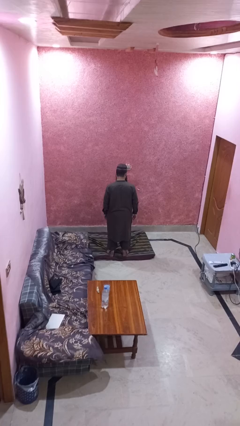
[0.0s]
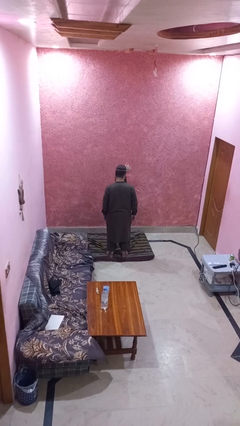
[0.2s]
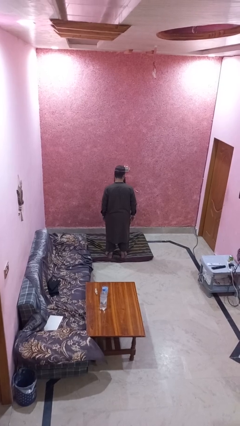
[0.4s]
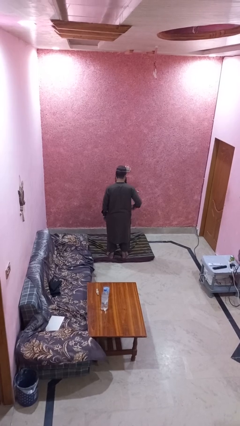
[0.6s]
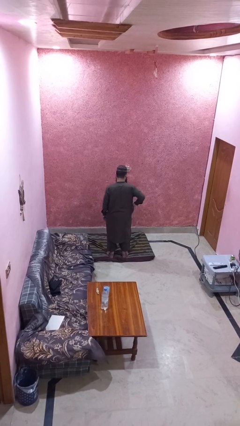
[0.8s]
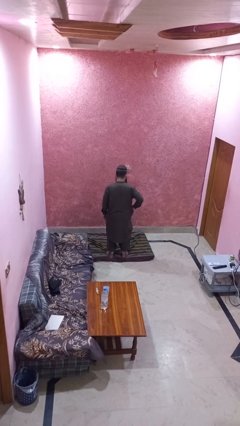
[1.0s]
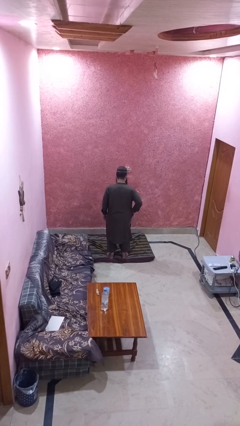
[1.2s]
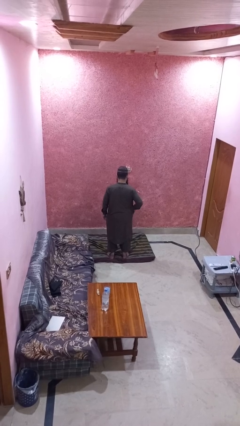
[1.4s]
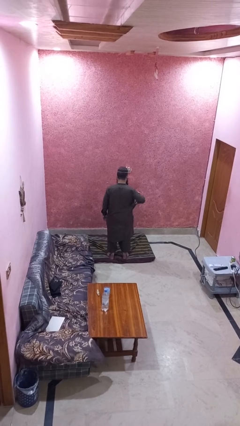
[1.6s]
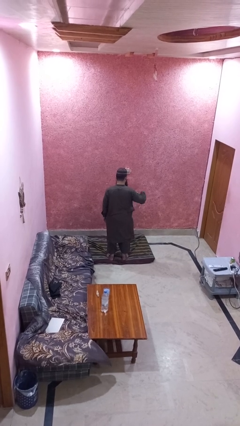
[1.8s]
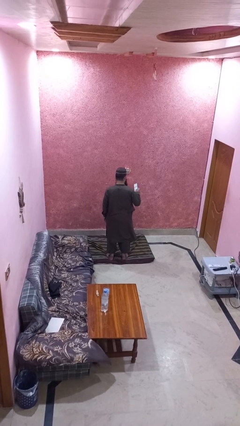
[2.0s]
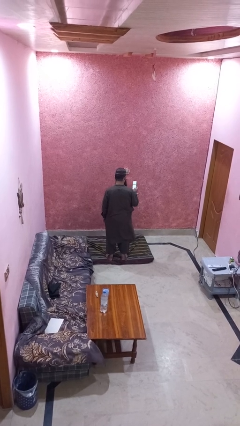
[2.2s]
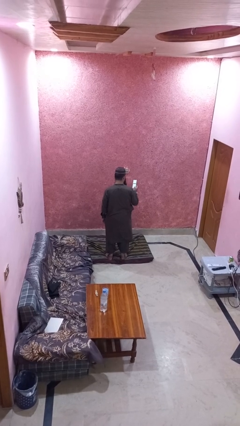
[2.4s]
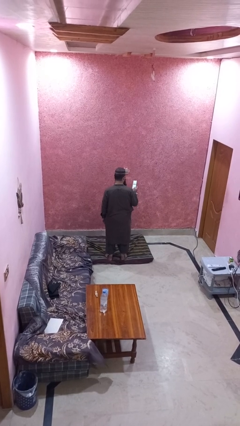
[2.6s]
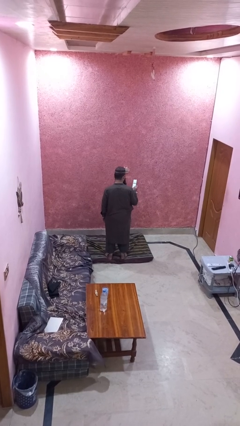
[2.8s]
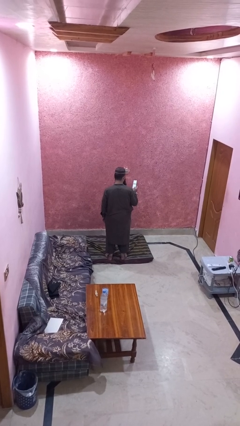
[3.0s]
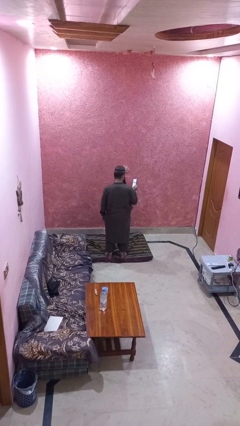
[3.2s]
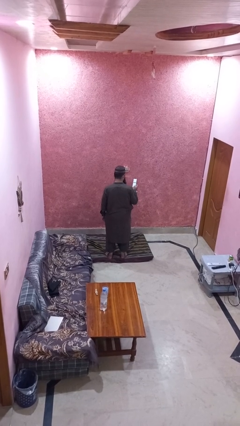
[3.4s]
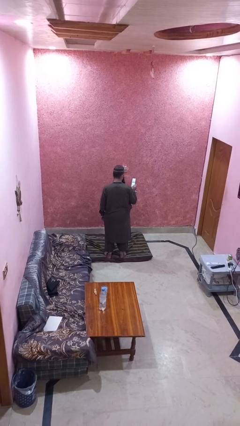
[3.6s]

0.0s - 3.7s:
person takes phone from pocket

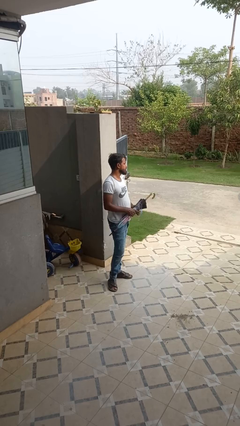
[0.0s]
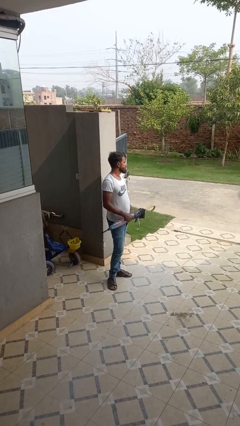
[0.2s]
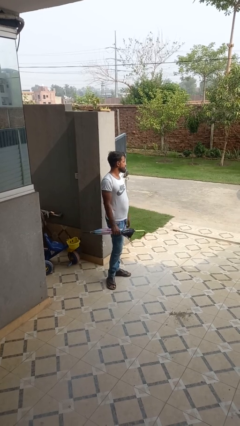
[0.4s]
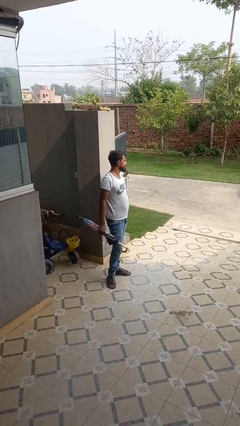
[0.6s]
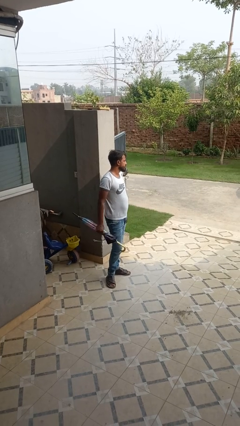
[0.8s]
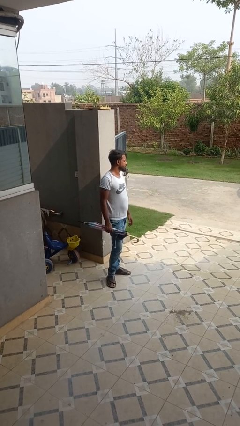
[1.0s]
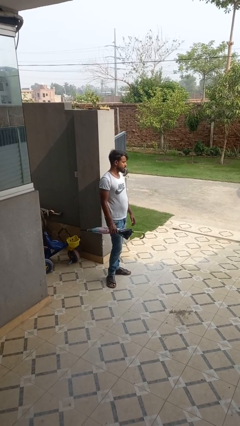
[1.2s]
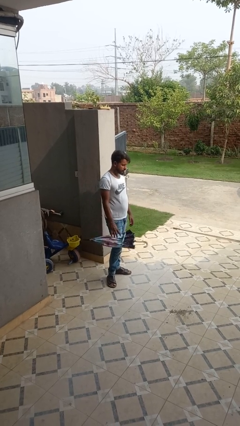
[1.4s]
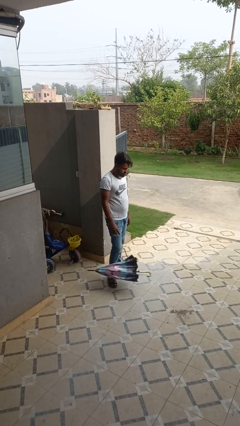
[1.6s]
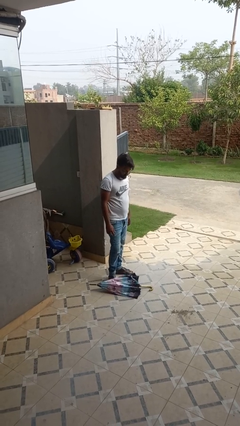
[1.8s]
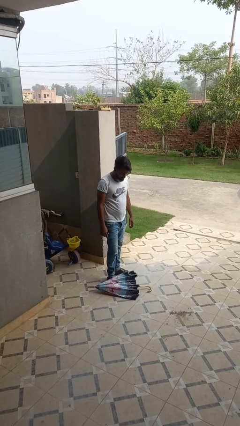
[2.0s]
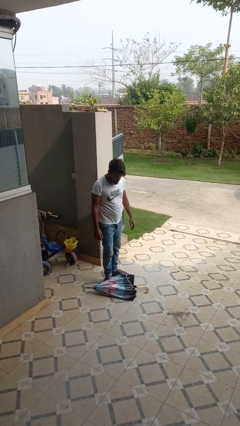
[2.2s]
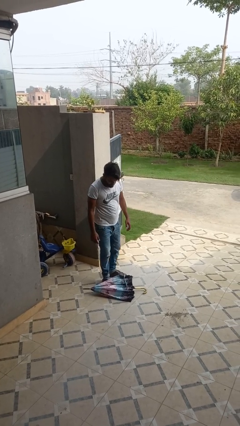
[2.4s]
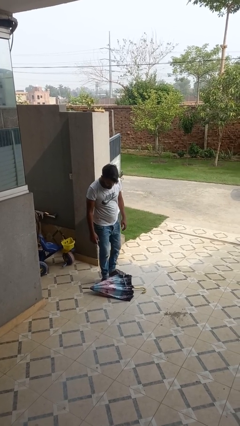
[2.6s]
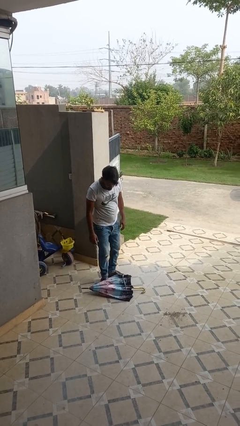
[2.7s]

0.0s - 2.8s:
person drops object

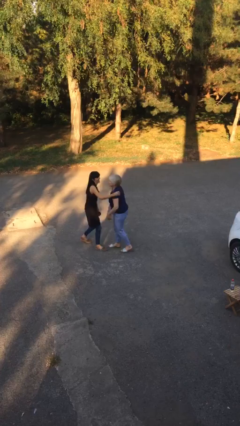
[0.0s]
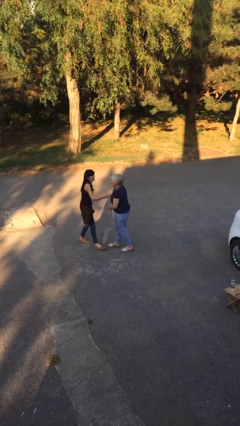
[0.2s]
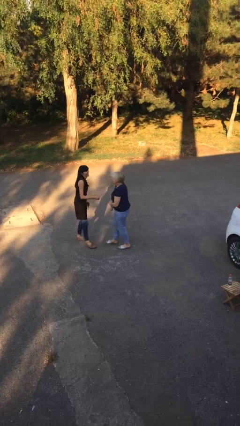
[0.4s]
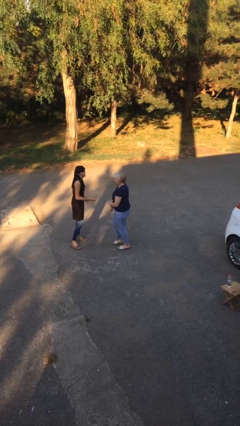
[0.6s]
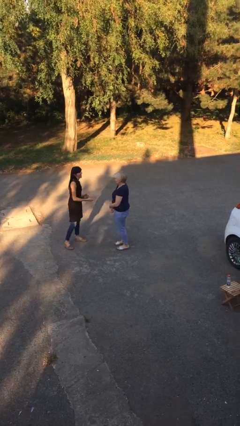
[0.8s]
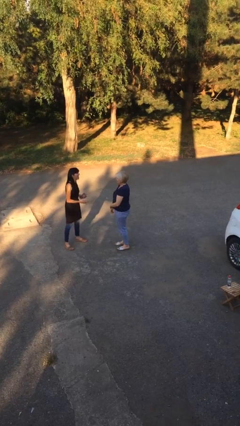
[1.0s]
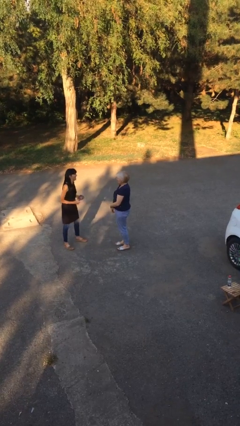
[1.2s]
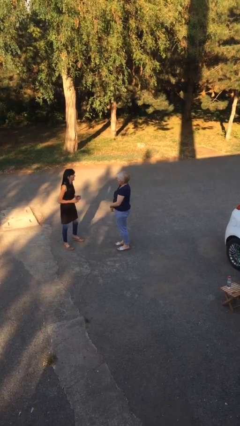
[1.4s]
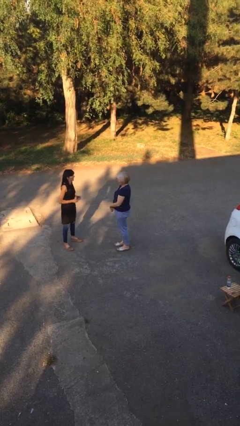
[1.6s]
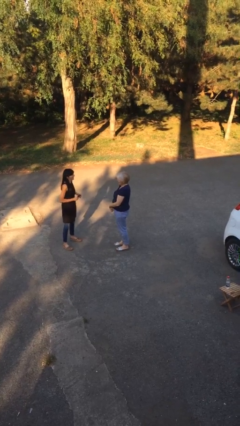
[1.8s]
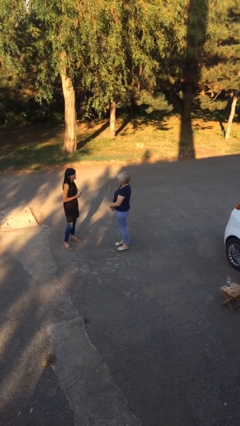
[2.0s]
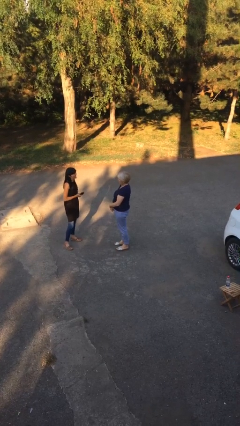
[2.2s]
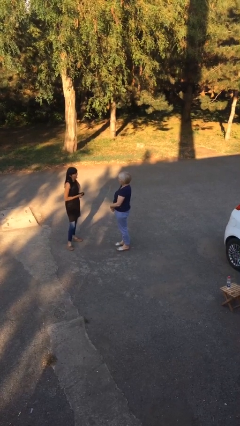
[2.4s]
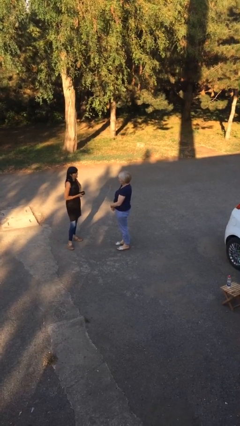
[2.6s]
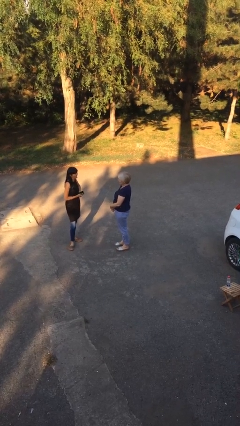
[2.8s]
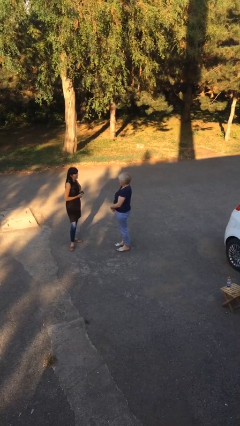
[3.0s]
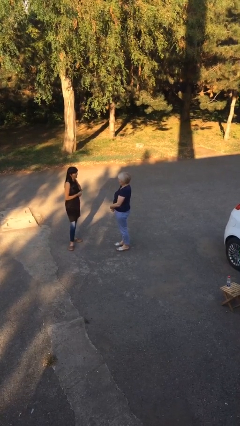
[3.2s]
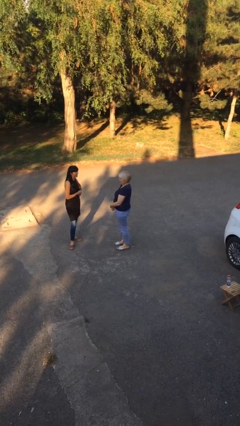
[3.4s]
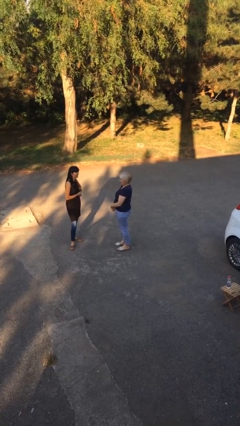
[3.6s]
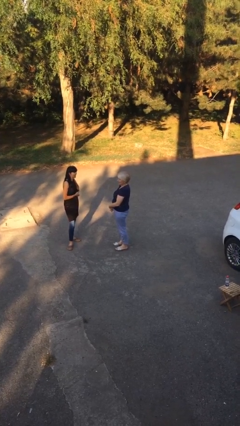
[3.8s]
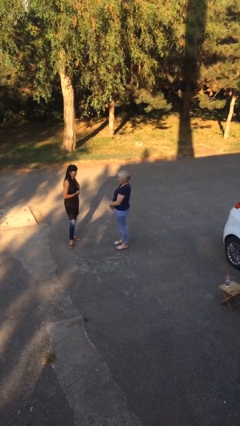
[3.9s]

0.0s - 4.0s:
person talks to person

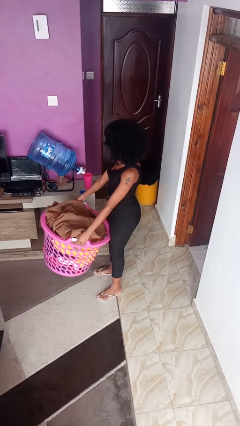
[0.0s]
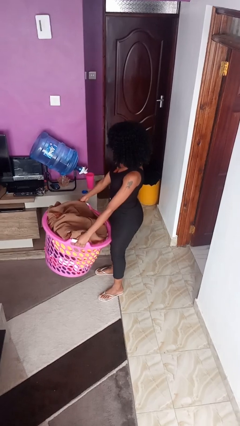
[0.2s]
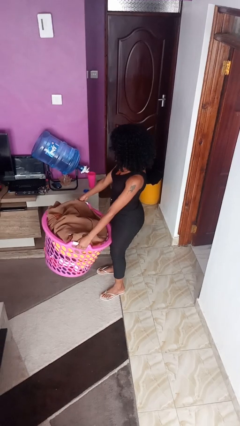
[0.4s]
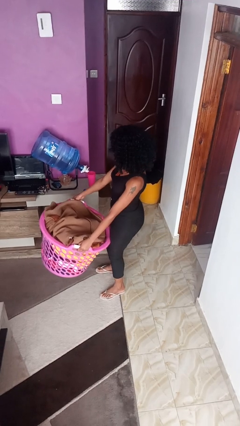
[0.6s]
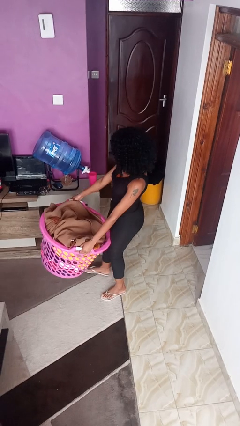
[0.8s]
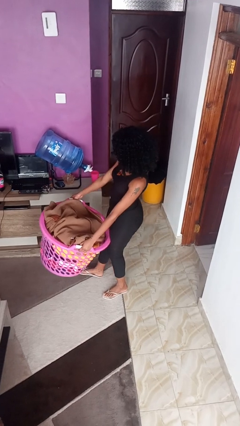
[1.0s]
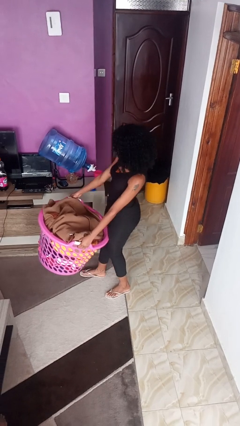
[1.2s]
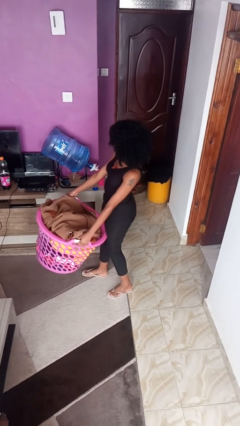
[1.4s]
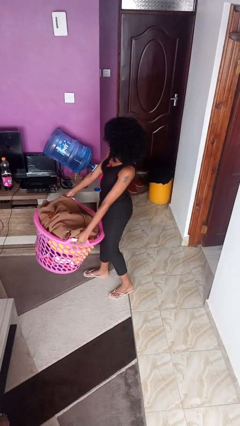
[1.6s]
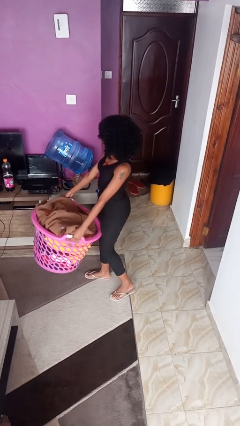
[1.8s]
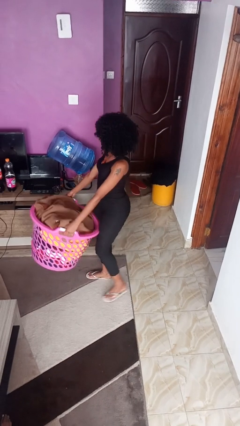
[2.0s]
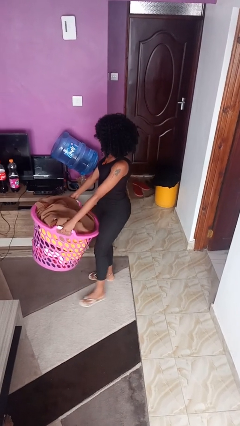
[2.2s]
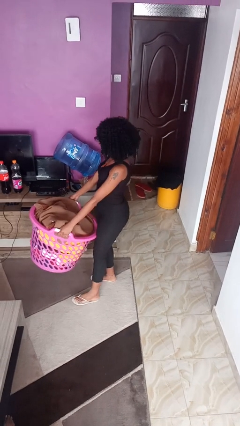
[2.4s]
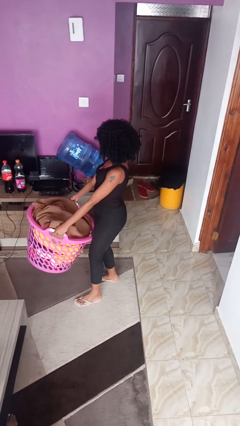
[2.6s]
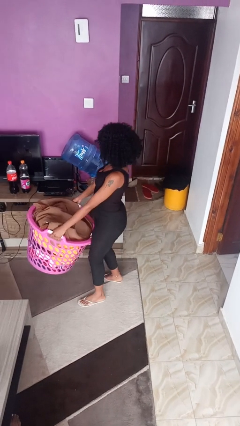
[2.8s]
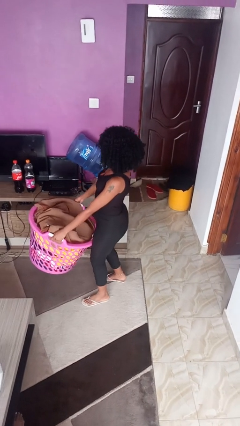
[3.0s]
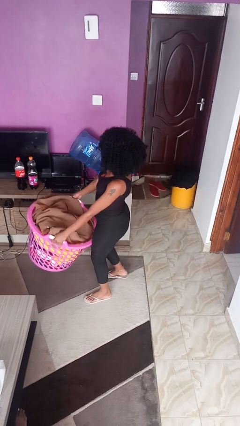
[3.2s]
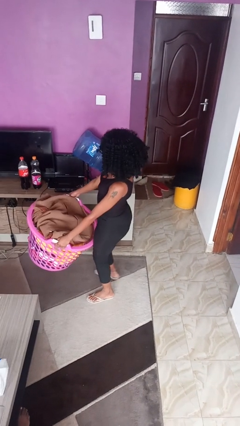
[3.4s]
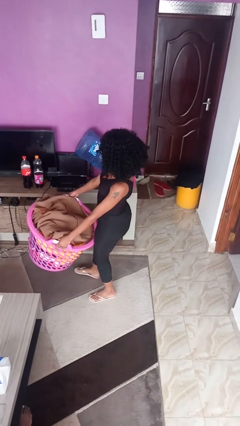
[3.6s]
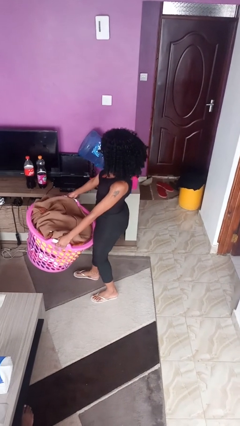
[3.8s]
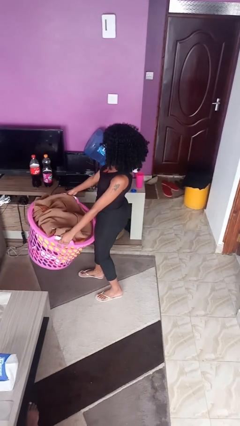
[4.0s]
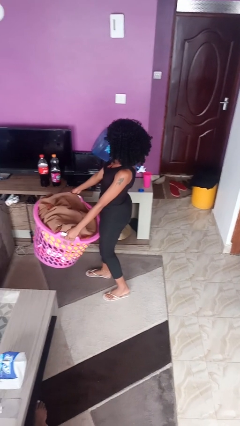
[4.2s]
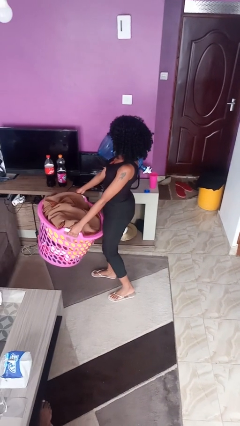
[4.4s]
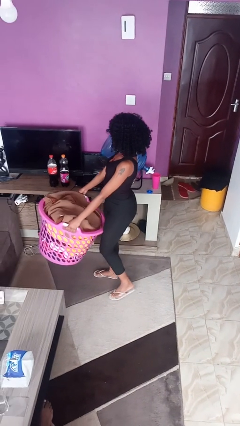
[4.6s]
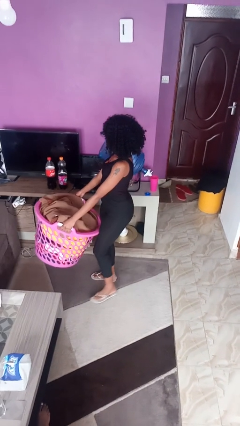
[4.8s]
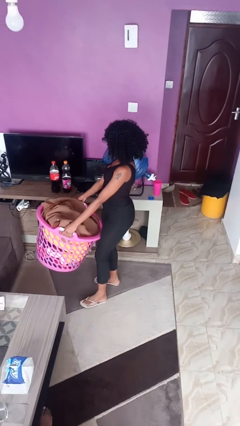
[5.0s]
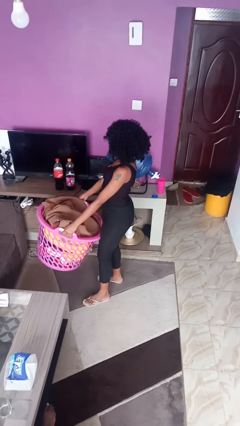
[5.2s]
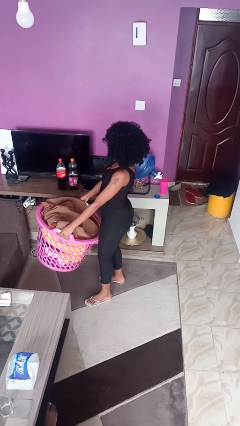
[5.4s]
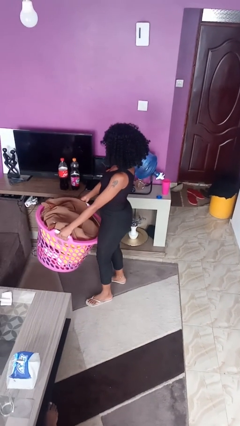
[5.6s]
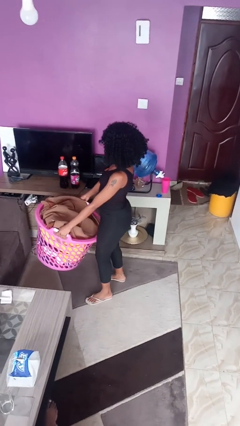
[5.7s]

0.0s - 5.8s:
person carries laundry basket

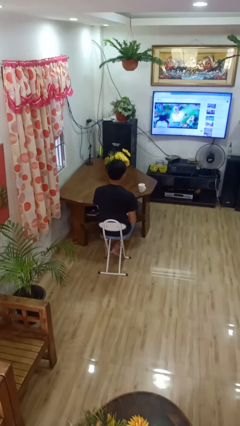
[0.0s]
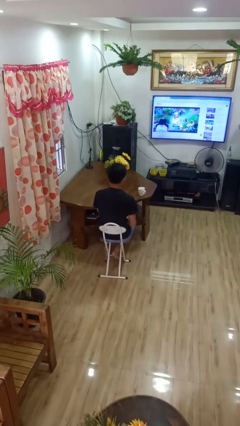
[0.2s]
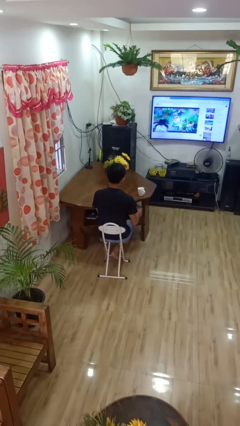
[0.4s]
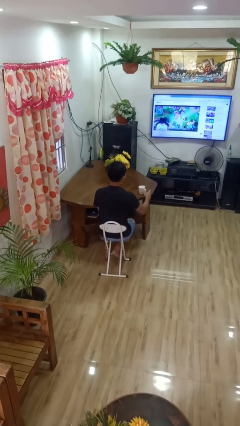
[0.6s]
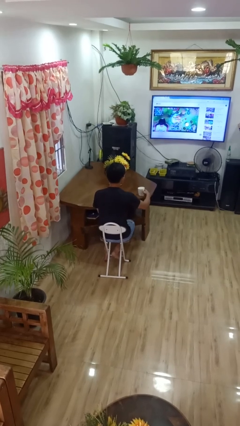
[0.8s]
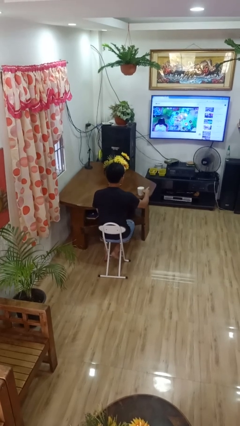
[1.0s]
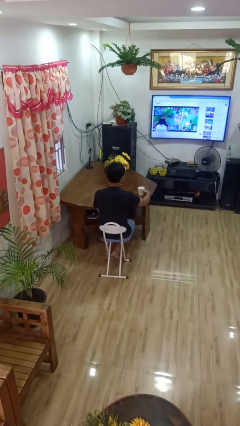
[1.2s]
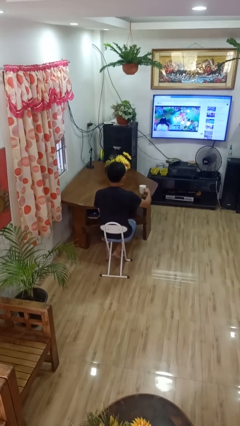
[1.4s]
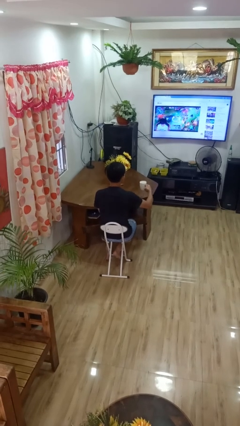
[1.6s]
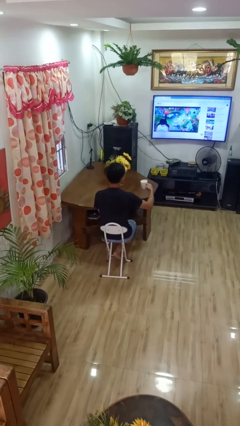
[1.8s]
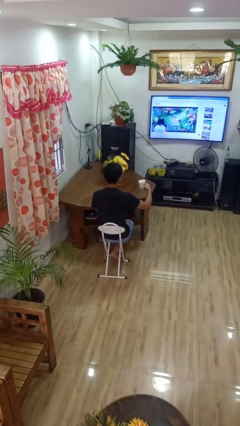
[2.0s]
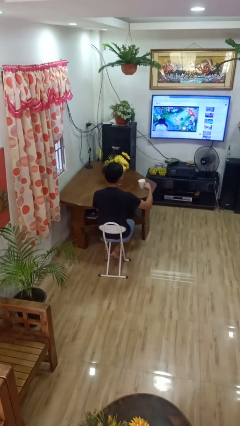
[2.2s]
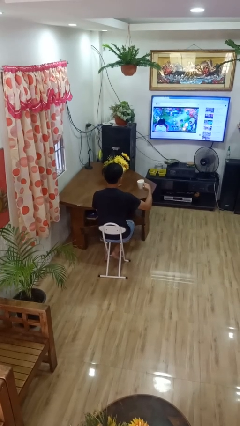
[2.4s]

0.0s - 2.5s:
person picks up object from table
